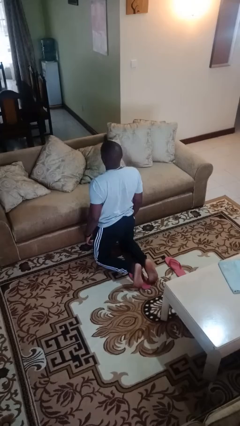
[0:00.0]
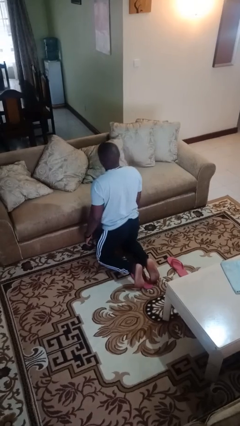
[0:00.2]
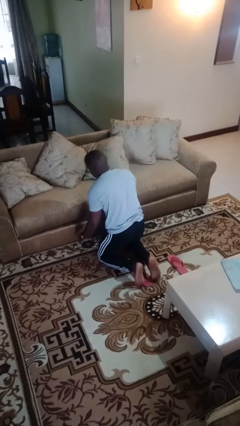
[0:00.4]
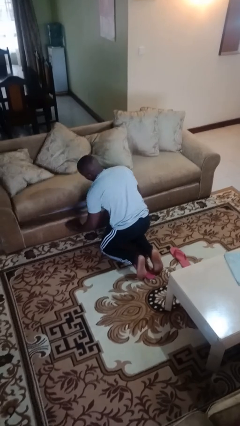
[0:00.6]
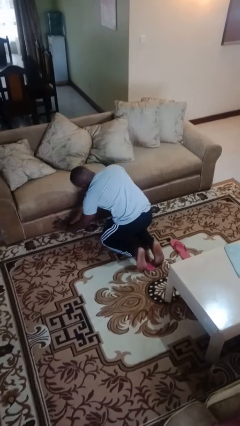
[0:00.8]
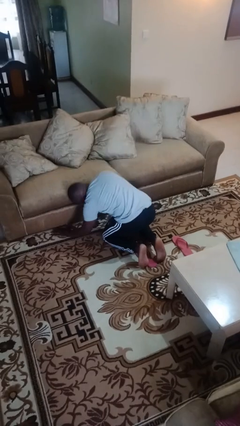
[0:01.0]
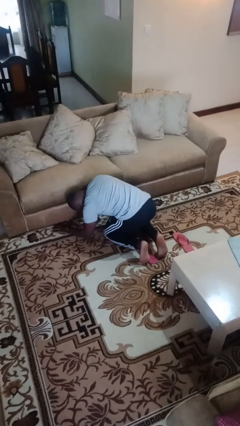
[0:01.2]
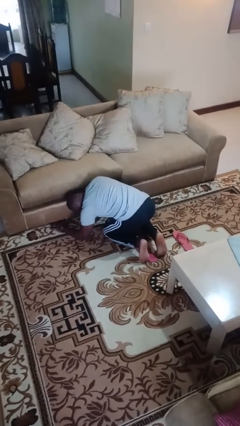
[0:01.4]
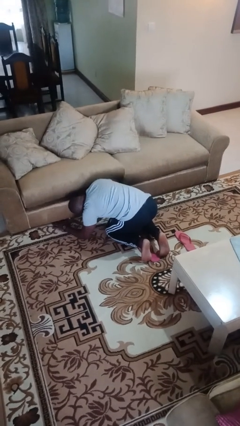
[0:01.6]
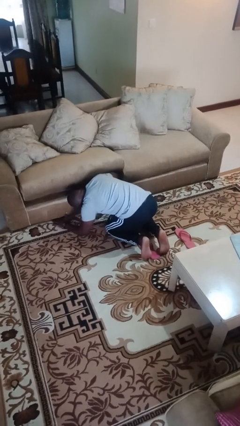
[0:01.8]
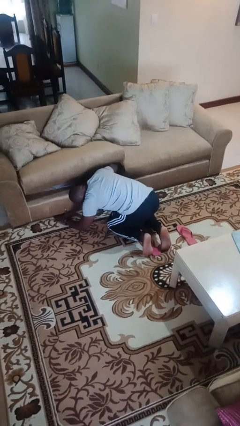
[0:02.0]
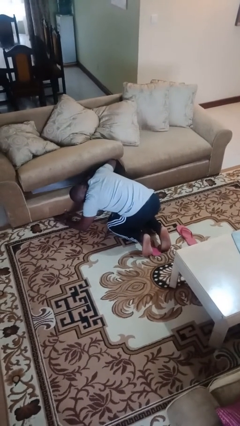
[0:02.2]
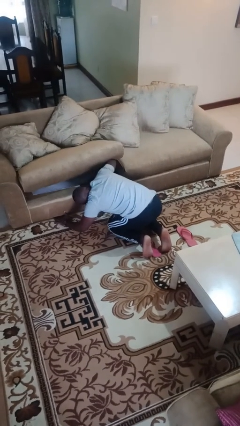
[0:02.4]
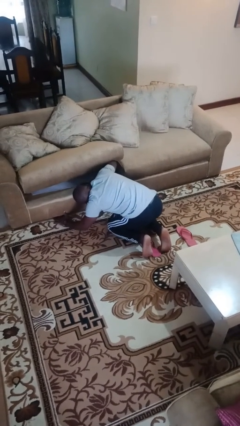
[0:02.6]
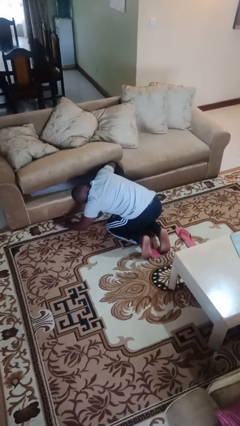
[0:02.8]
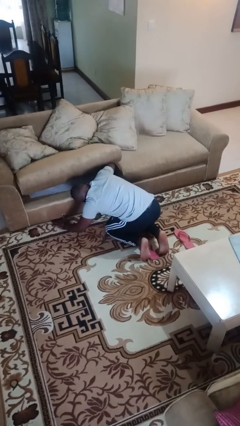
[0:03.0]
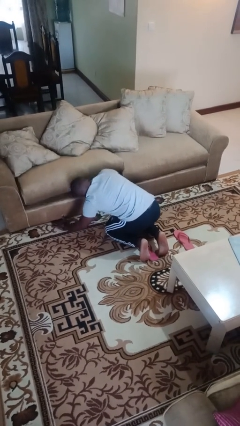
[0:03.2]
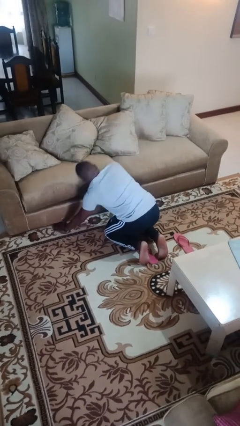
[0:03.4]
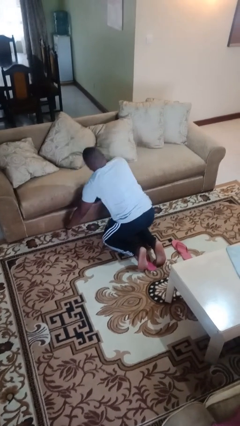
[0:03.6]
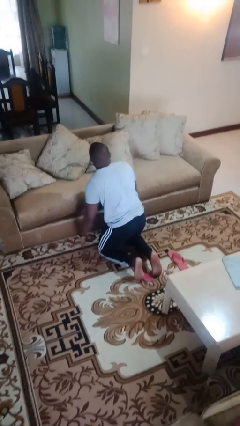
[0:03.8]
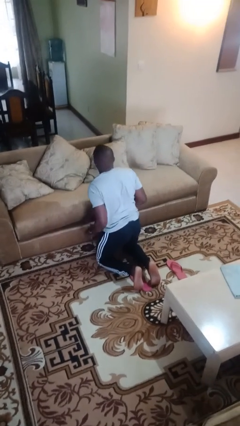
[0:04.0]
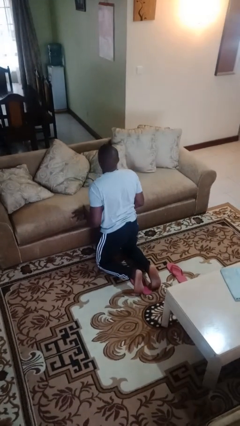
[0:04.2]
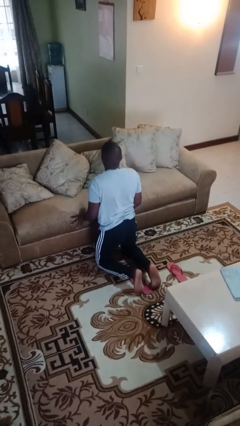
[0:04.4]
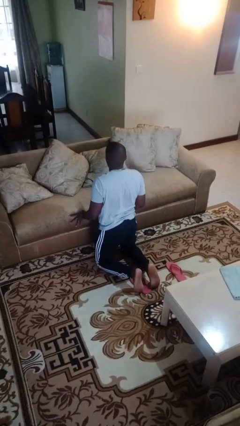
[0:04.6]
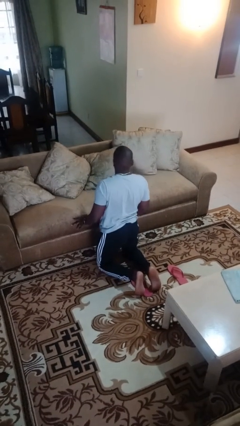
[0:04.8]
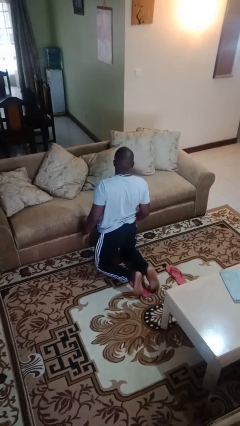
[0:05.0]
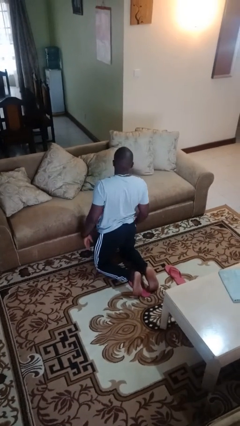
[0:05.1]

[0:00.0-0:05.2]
person searches under couch

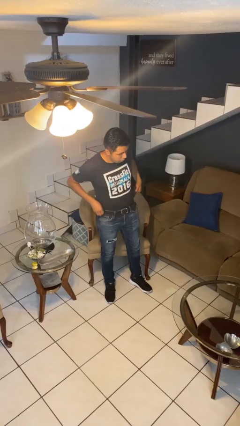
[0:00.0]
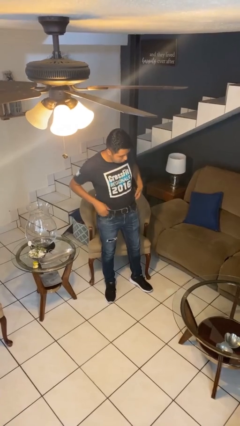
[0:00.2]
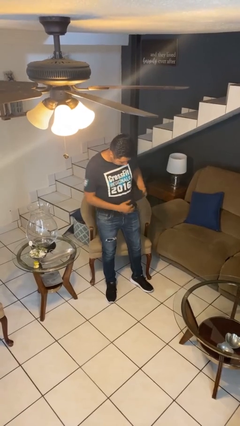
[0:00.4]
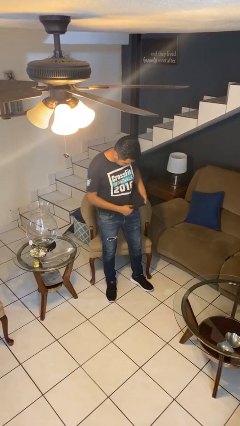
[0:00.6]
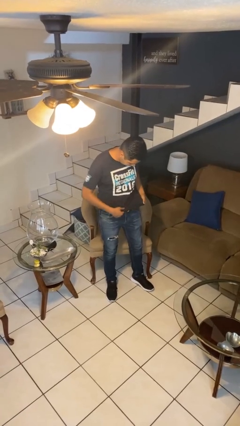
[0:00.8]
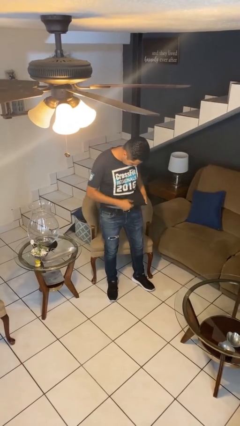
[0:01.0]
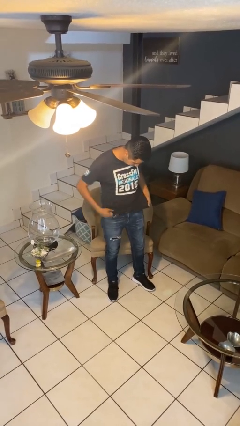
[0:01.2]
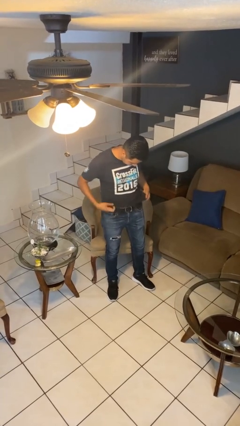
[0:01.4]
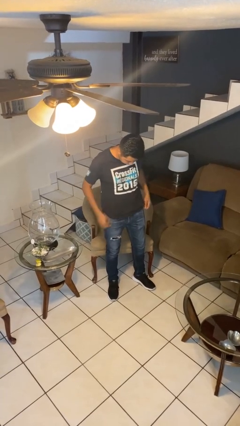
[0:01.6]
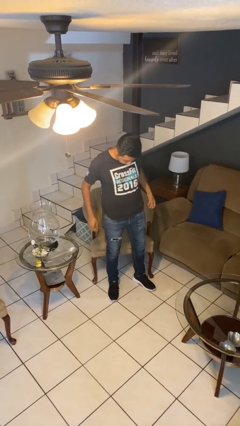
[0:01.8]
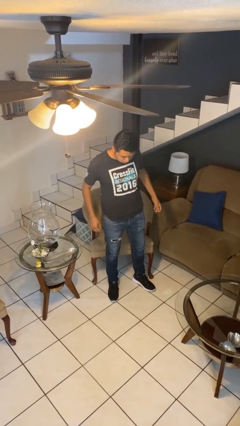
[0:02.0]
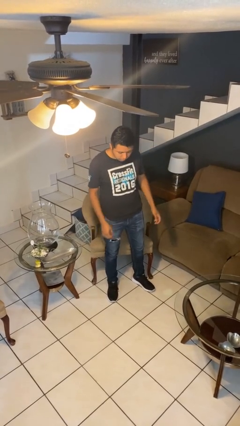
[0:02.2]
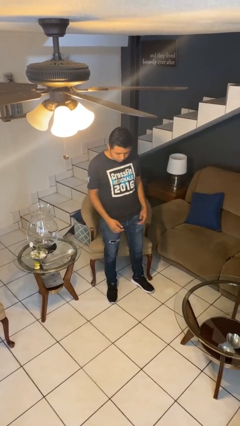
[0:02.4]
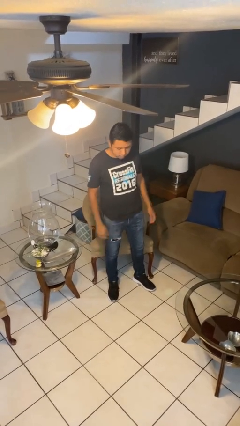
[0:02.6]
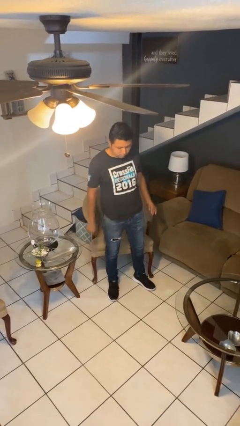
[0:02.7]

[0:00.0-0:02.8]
person untucks shirt

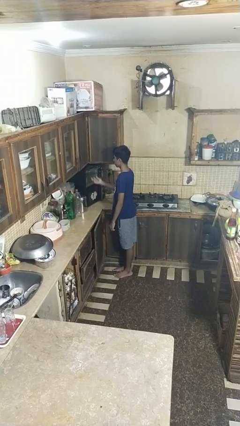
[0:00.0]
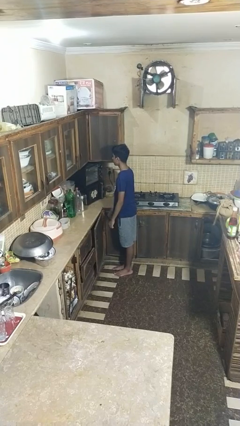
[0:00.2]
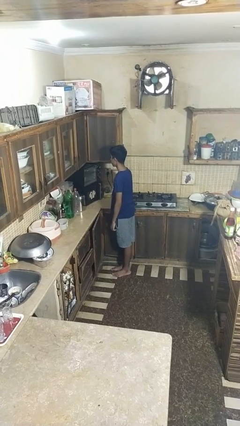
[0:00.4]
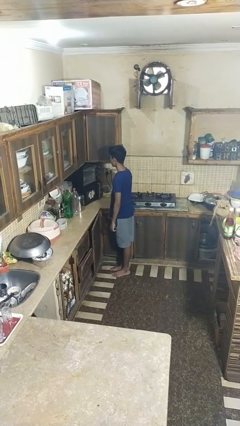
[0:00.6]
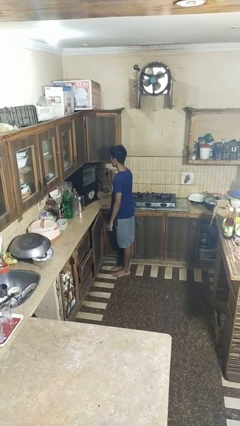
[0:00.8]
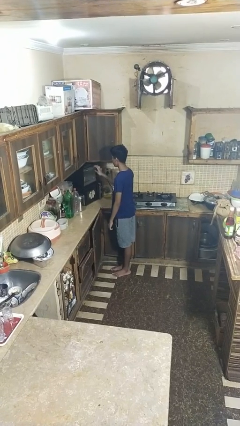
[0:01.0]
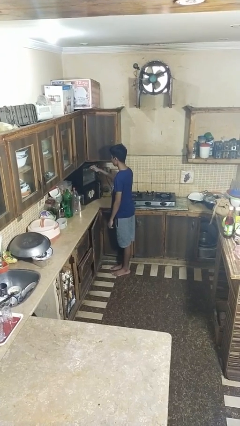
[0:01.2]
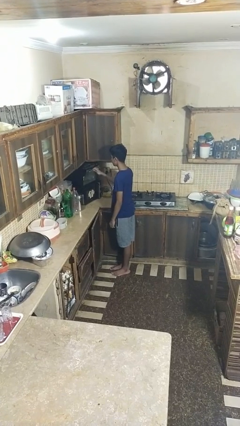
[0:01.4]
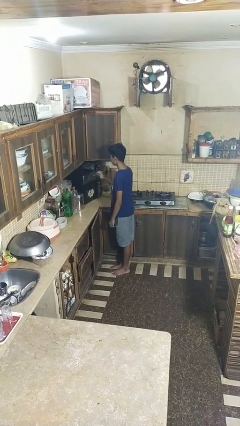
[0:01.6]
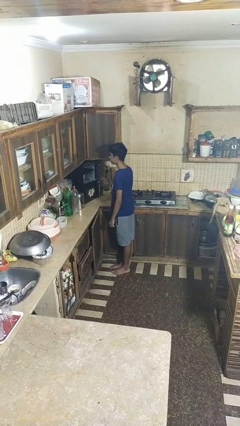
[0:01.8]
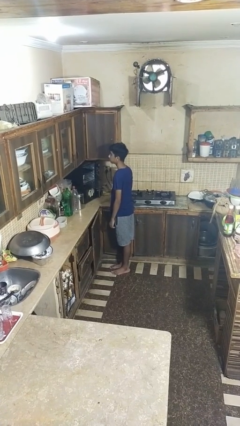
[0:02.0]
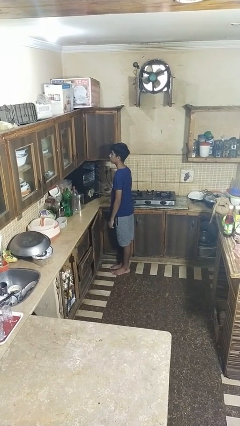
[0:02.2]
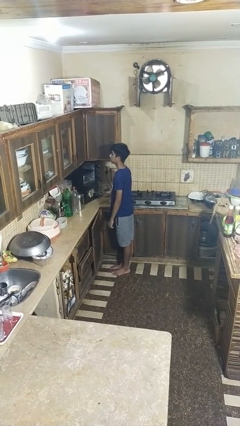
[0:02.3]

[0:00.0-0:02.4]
person opens oven door

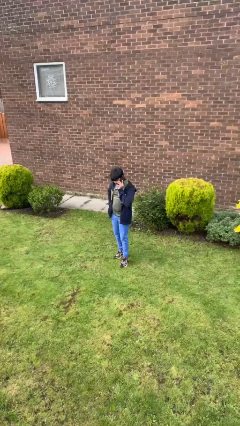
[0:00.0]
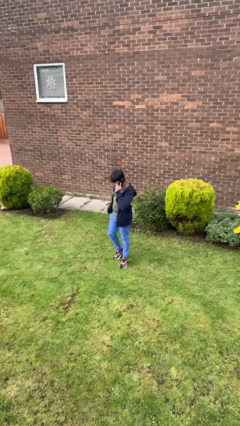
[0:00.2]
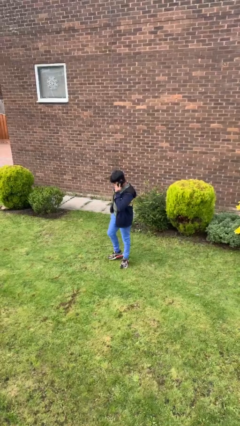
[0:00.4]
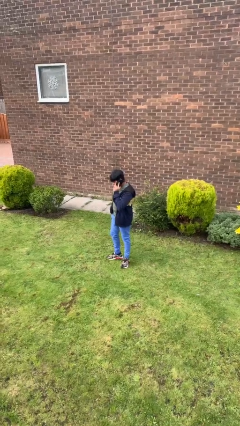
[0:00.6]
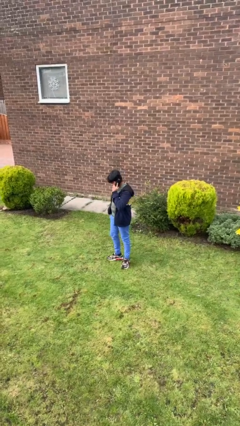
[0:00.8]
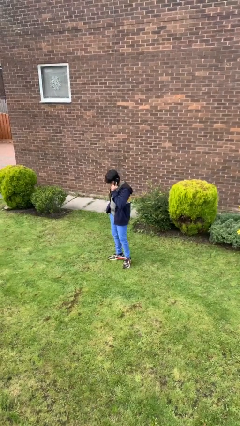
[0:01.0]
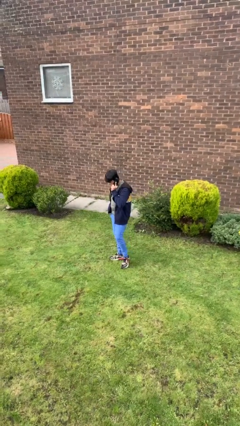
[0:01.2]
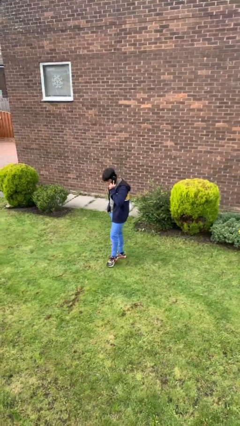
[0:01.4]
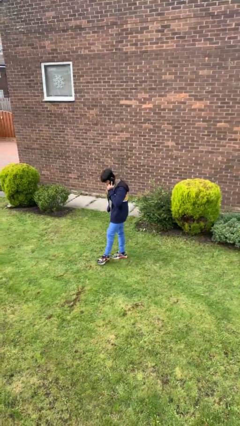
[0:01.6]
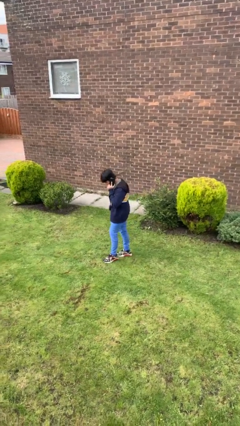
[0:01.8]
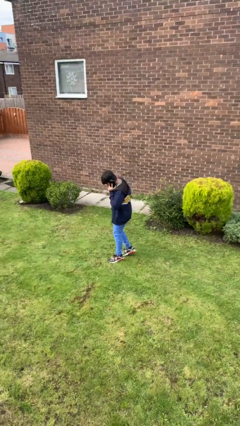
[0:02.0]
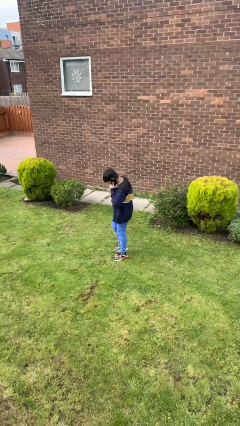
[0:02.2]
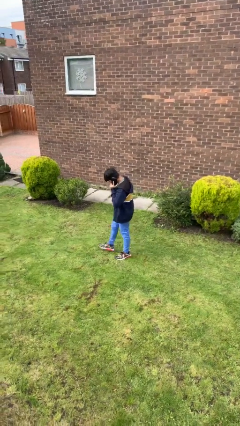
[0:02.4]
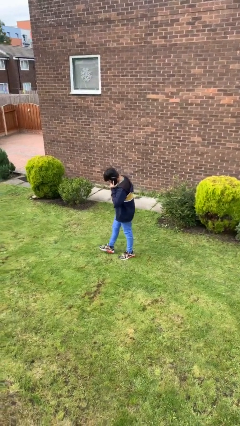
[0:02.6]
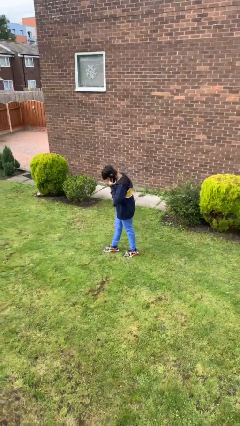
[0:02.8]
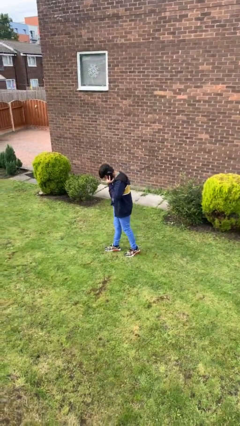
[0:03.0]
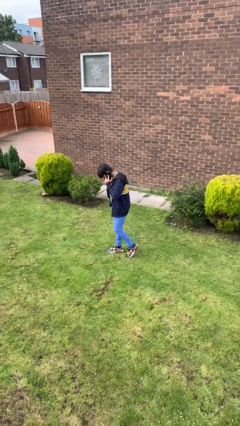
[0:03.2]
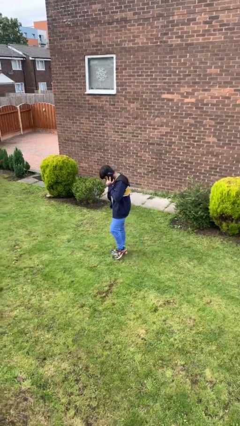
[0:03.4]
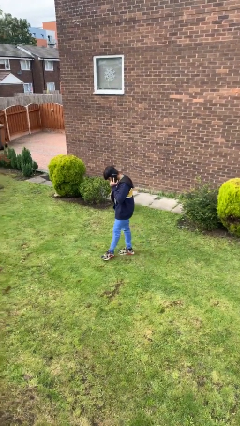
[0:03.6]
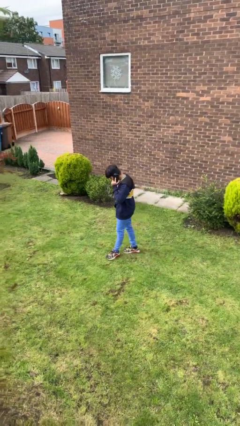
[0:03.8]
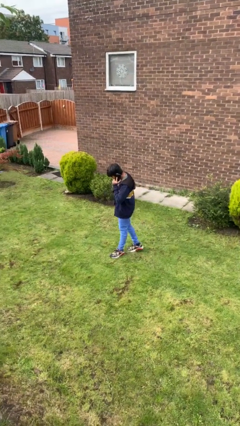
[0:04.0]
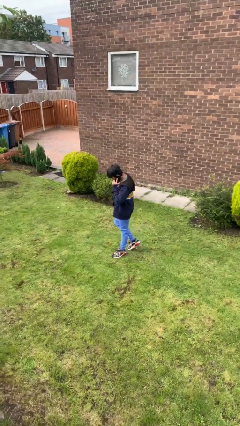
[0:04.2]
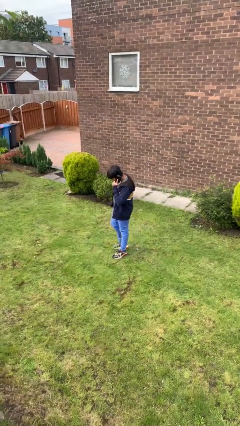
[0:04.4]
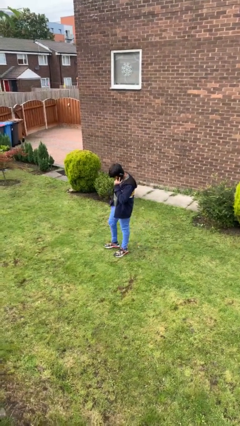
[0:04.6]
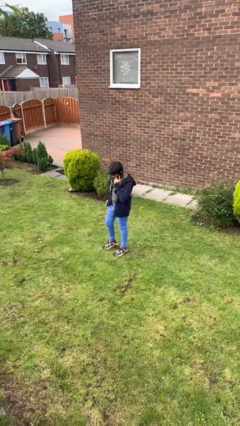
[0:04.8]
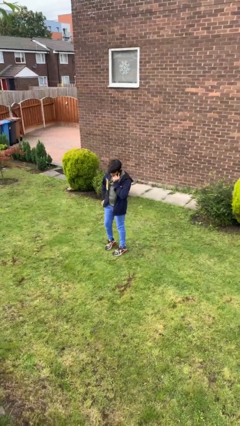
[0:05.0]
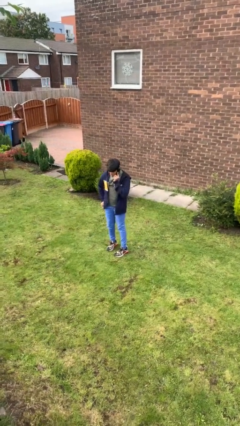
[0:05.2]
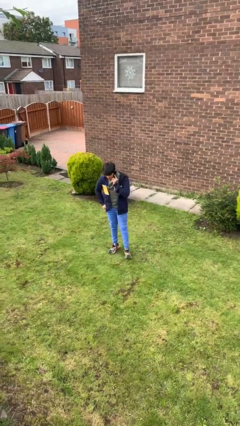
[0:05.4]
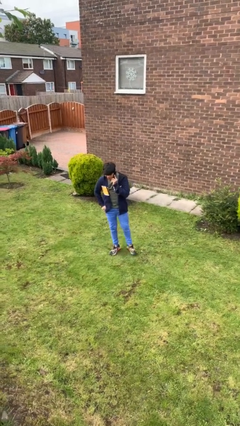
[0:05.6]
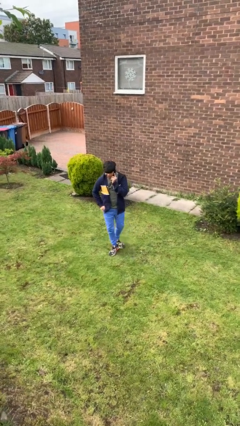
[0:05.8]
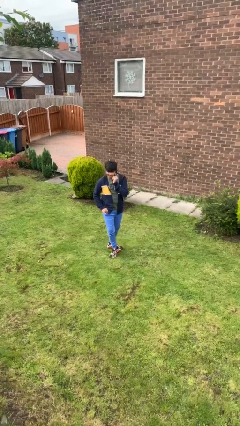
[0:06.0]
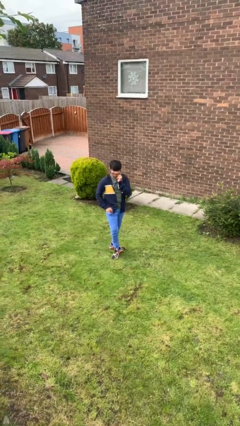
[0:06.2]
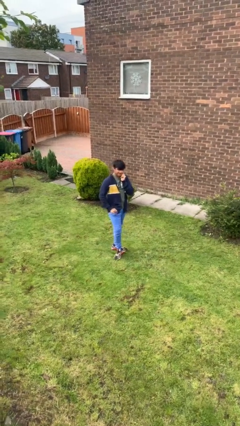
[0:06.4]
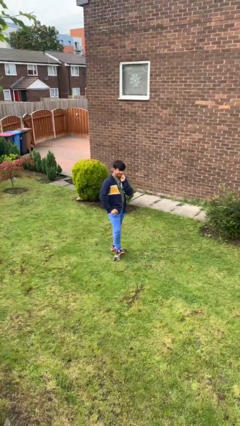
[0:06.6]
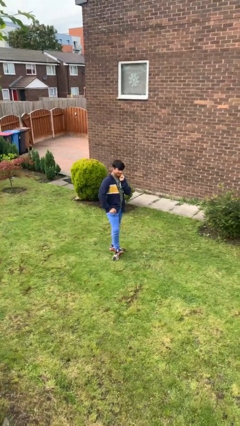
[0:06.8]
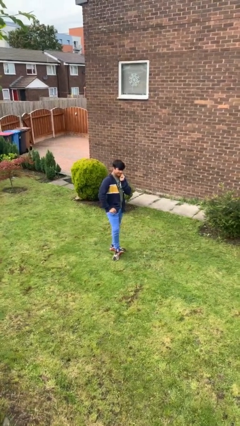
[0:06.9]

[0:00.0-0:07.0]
person talks on phone

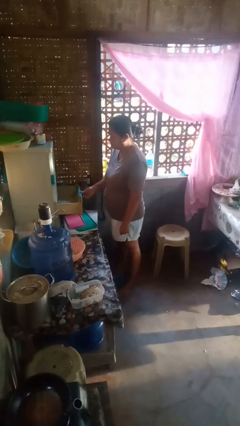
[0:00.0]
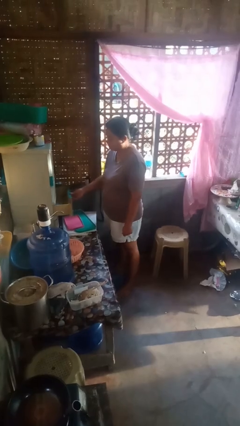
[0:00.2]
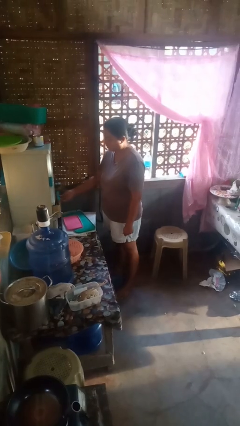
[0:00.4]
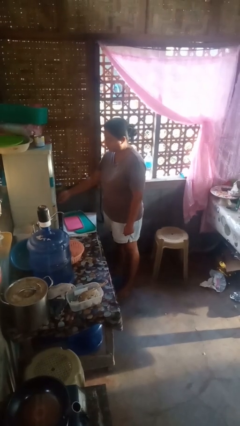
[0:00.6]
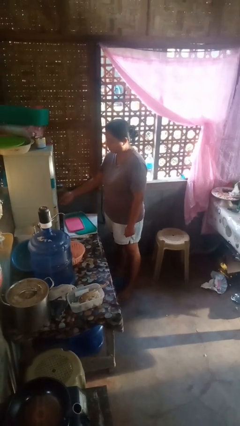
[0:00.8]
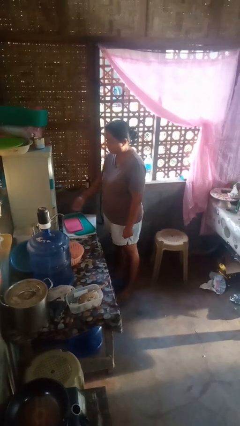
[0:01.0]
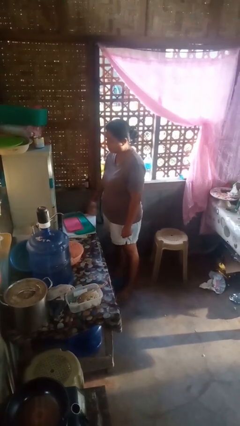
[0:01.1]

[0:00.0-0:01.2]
person closes kitchen drawer
